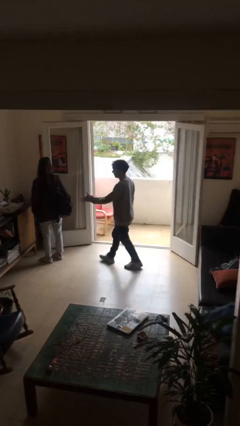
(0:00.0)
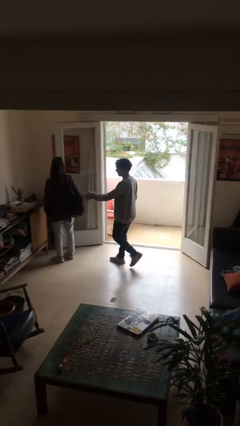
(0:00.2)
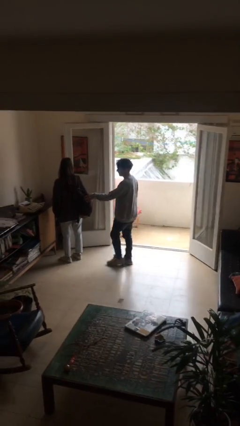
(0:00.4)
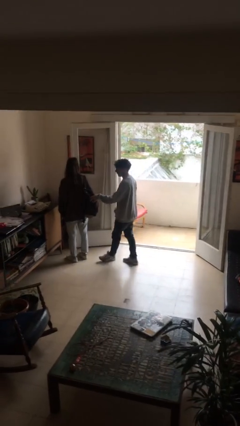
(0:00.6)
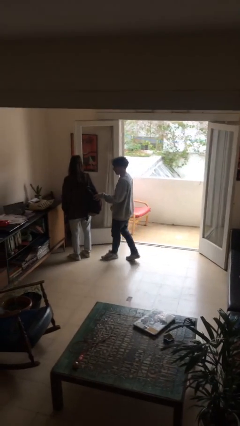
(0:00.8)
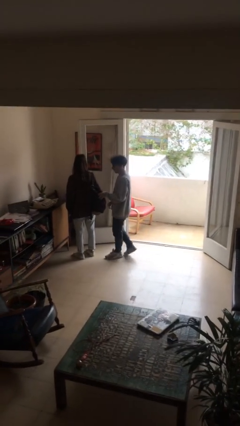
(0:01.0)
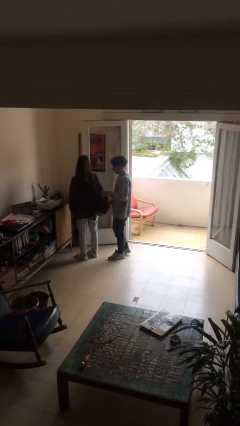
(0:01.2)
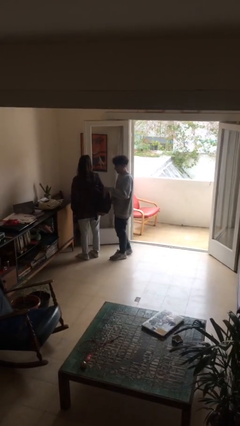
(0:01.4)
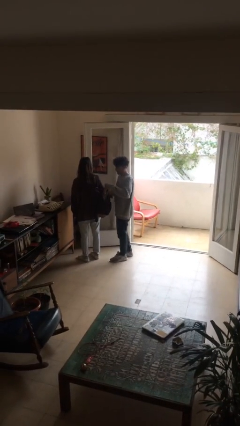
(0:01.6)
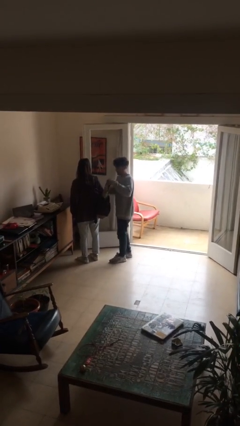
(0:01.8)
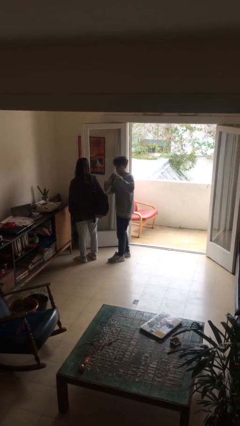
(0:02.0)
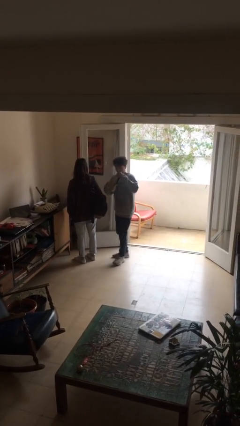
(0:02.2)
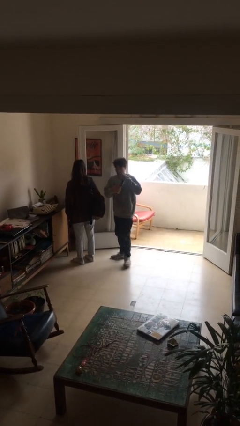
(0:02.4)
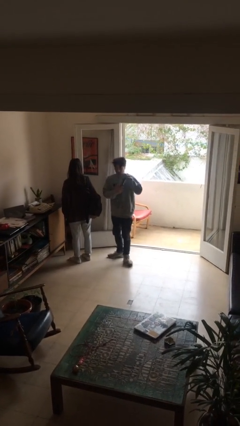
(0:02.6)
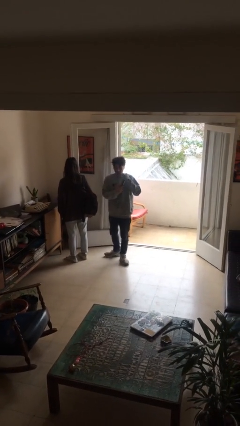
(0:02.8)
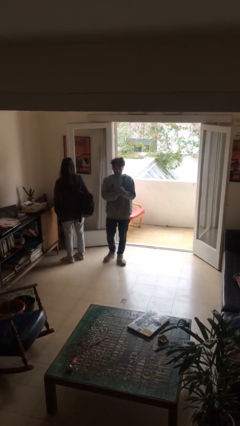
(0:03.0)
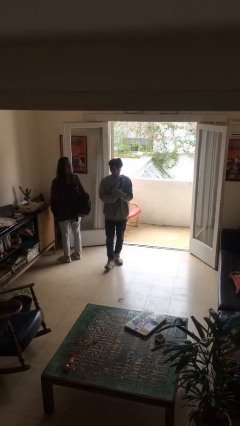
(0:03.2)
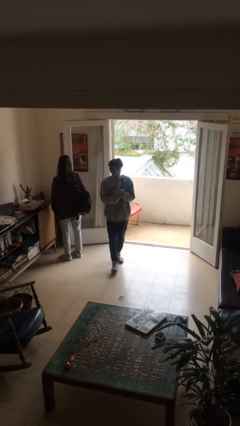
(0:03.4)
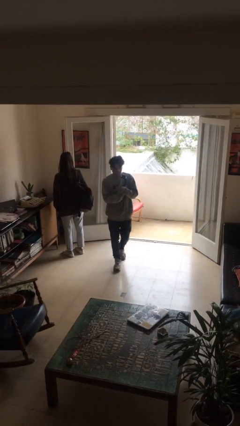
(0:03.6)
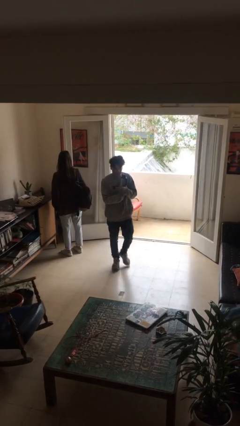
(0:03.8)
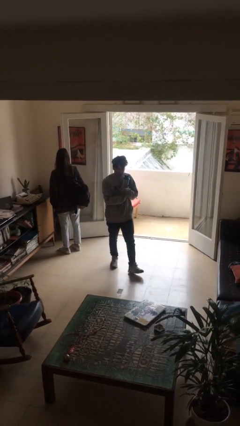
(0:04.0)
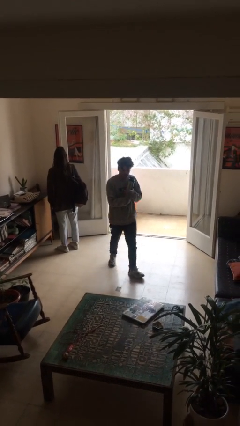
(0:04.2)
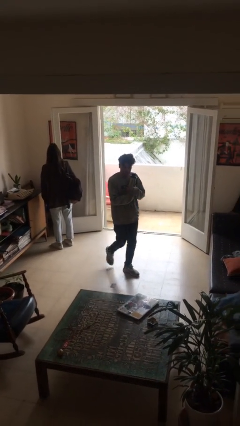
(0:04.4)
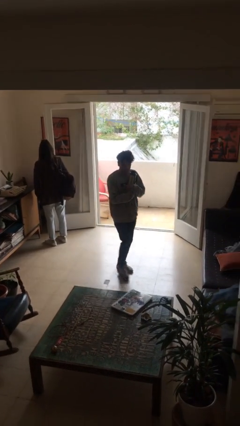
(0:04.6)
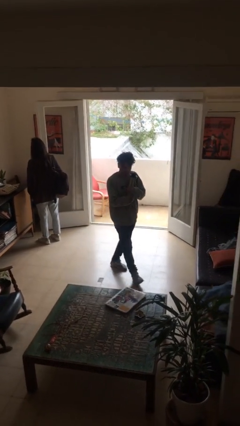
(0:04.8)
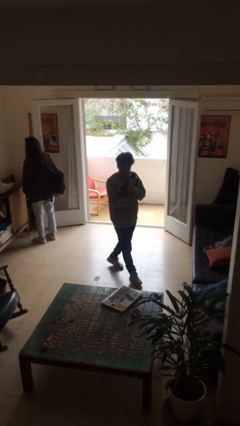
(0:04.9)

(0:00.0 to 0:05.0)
person steals object from person

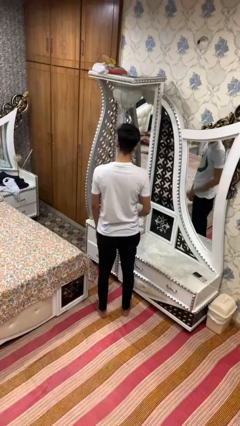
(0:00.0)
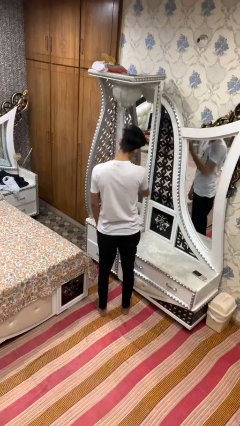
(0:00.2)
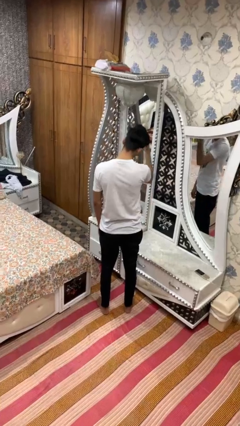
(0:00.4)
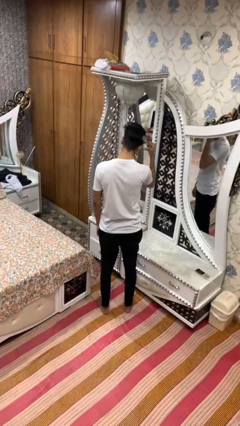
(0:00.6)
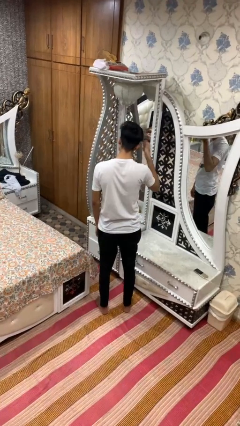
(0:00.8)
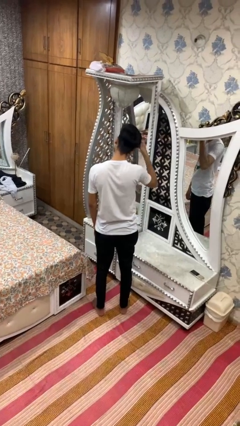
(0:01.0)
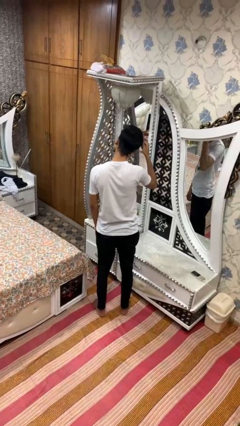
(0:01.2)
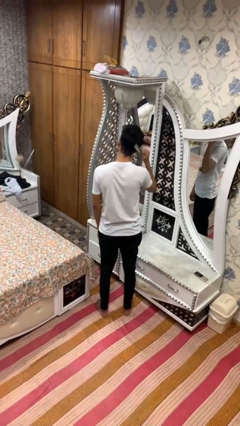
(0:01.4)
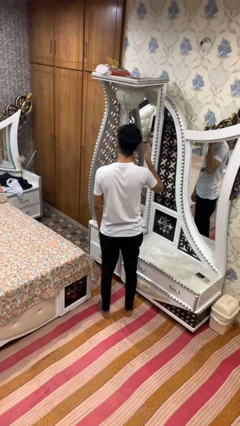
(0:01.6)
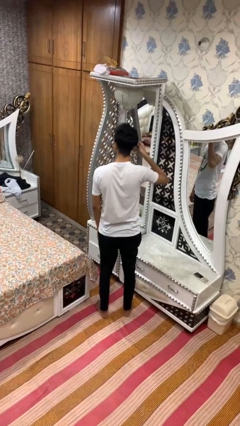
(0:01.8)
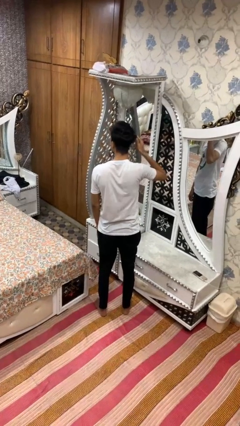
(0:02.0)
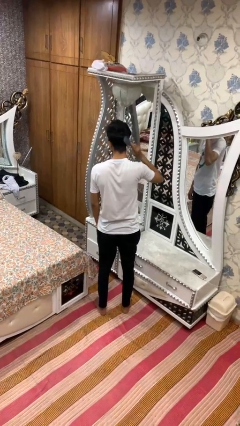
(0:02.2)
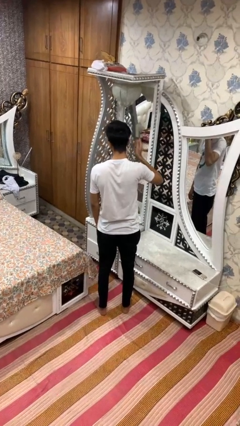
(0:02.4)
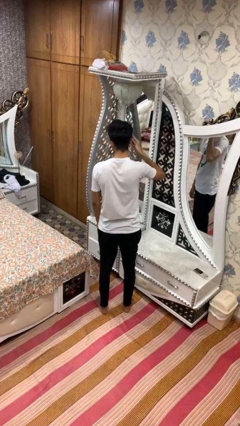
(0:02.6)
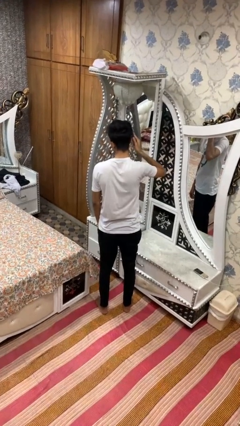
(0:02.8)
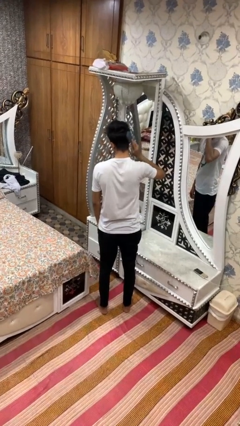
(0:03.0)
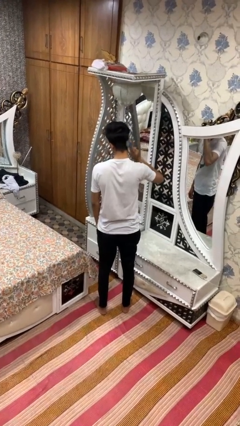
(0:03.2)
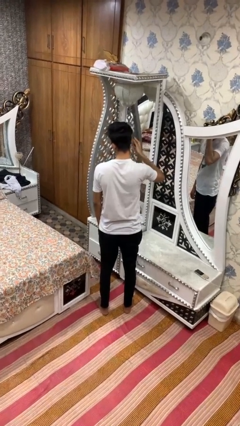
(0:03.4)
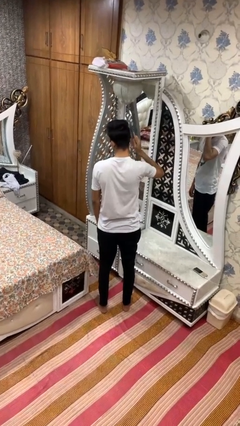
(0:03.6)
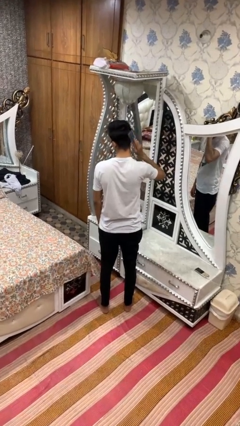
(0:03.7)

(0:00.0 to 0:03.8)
person brushes hair

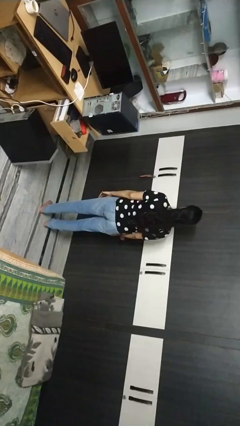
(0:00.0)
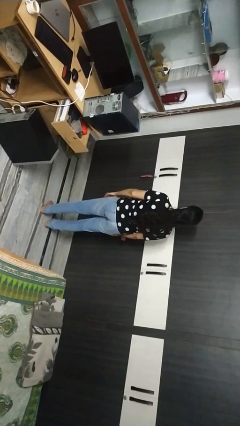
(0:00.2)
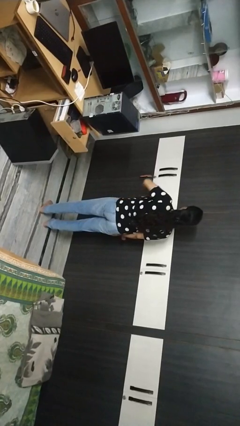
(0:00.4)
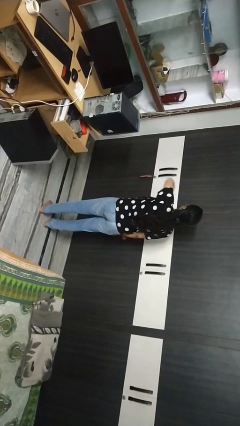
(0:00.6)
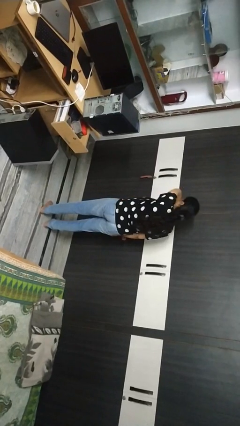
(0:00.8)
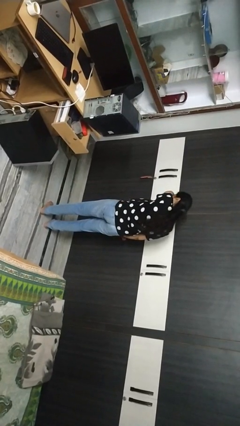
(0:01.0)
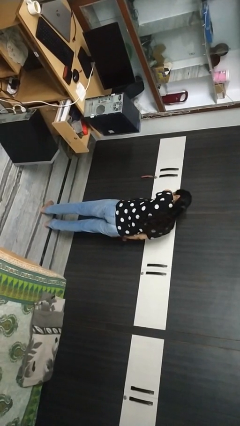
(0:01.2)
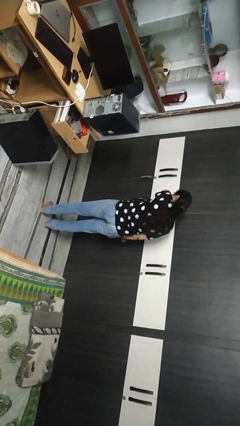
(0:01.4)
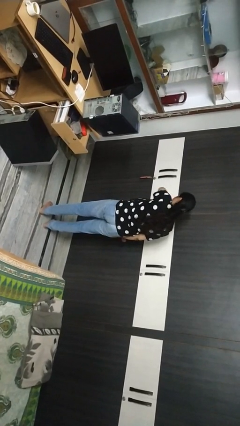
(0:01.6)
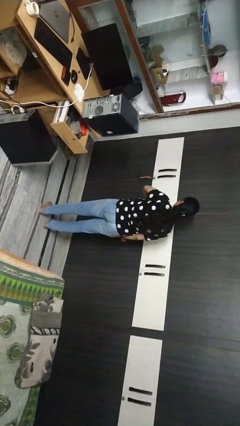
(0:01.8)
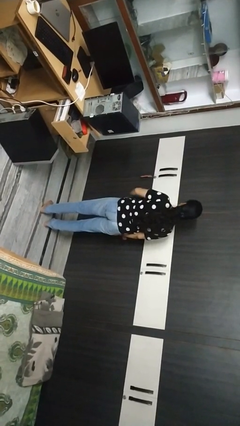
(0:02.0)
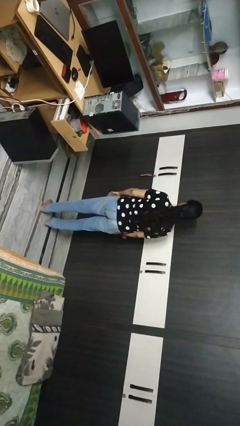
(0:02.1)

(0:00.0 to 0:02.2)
person sneezes into arm

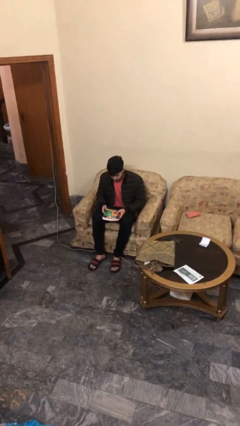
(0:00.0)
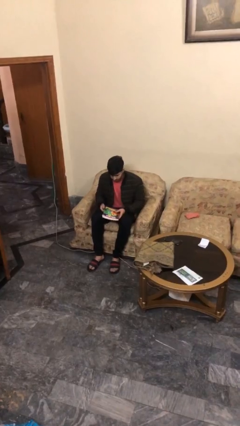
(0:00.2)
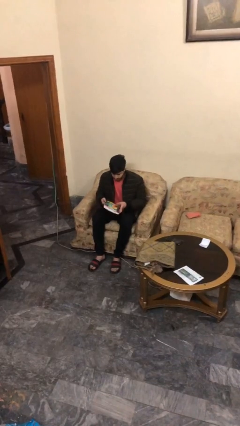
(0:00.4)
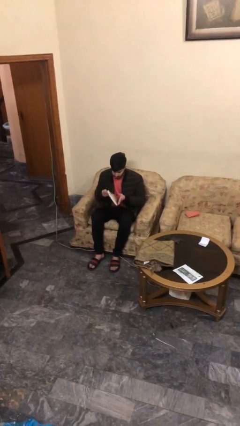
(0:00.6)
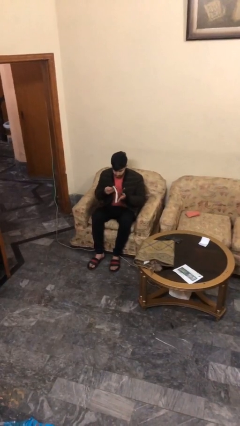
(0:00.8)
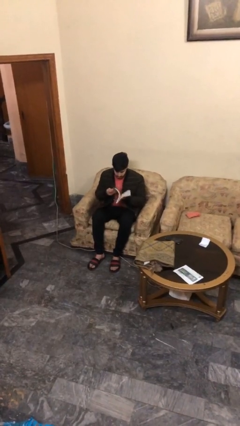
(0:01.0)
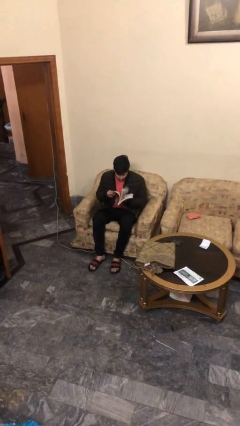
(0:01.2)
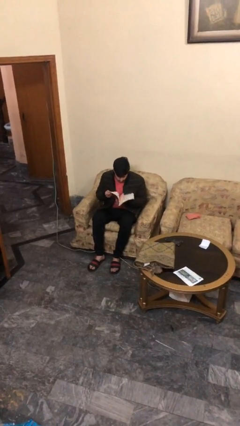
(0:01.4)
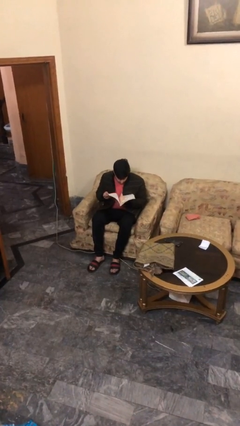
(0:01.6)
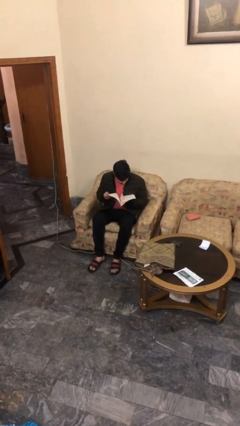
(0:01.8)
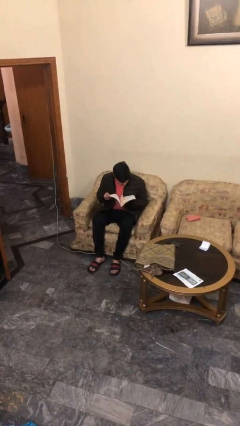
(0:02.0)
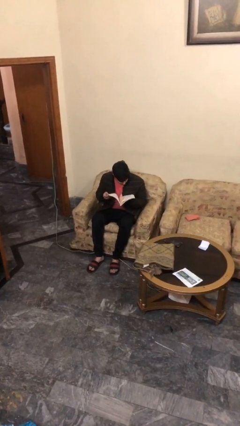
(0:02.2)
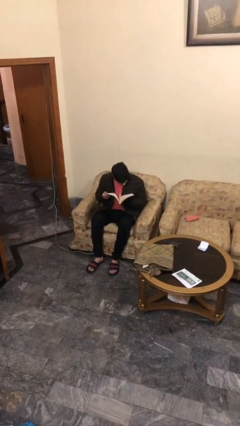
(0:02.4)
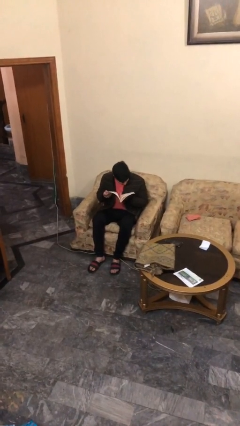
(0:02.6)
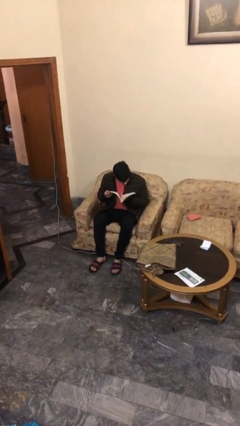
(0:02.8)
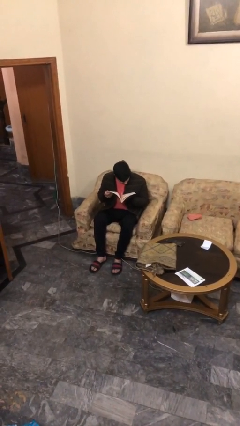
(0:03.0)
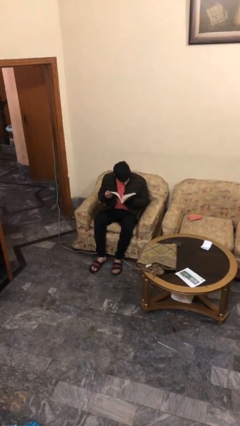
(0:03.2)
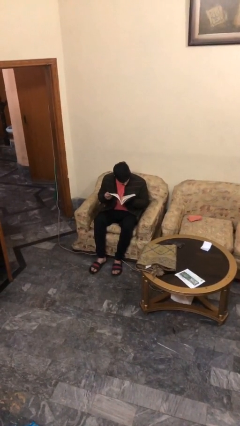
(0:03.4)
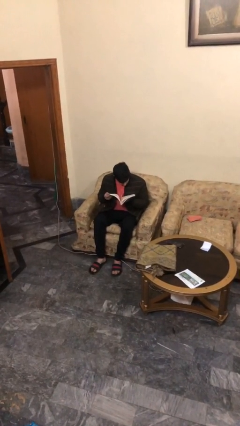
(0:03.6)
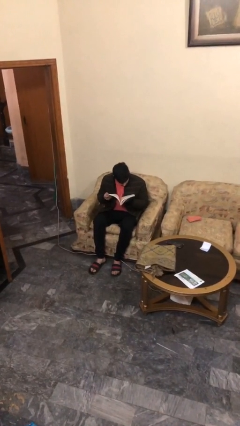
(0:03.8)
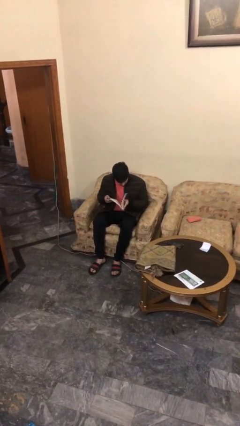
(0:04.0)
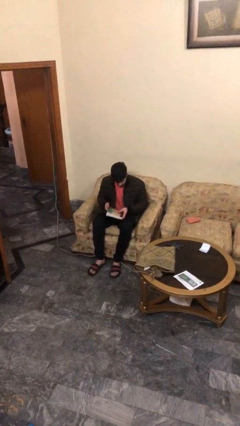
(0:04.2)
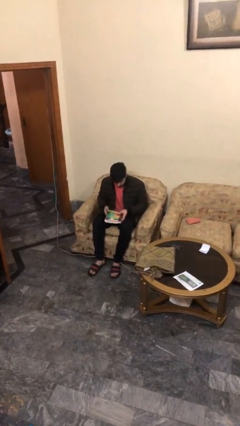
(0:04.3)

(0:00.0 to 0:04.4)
person reads document

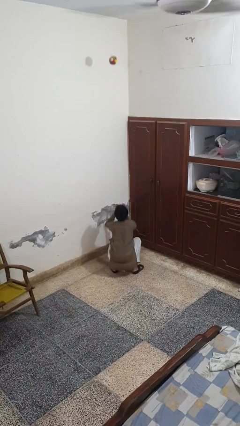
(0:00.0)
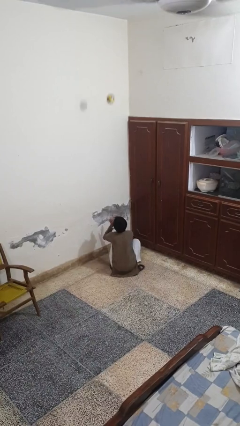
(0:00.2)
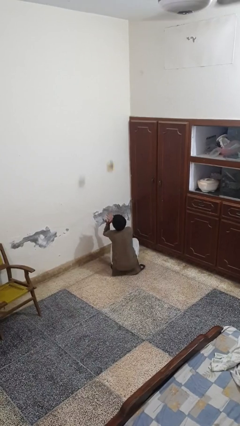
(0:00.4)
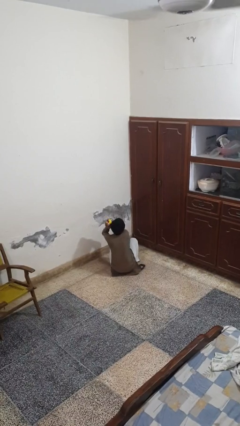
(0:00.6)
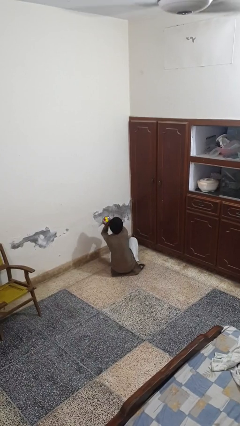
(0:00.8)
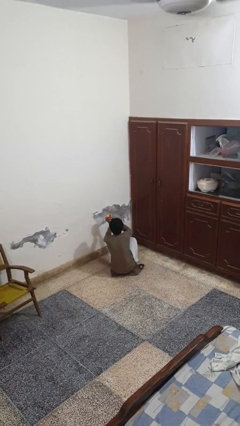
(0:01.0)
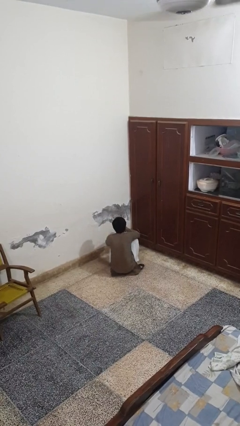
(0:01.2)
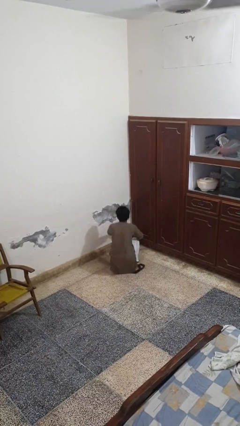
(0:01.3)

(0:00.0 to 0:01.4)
person catches dropped object

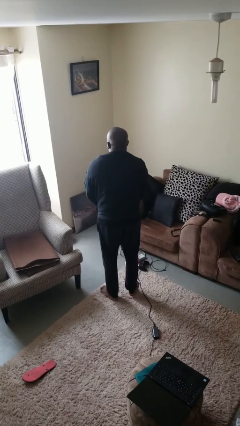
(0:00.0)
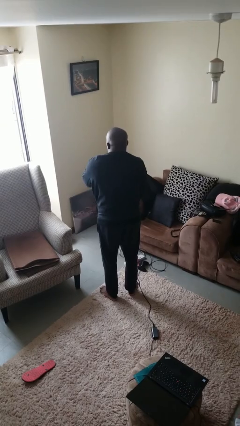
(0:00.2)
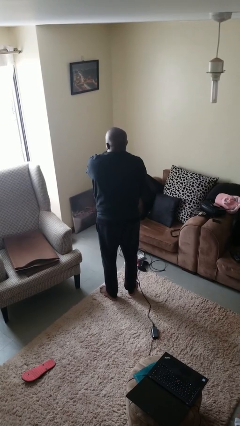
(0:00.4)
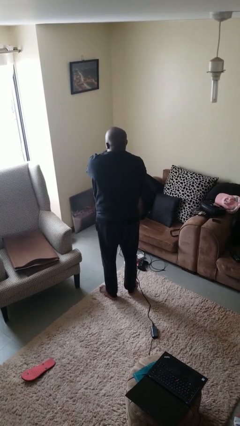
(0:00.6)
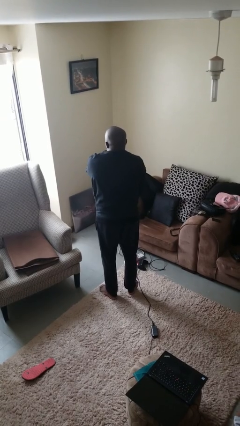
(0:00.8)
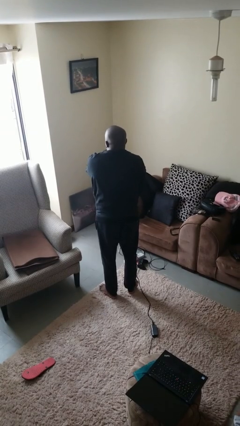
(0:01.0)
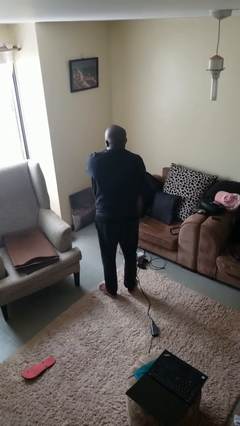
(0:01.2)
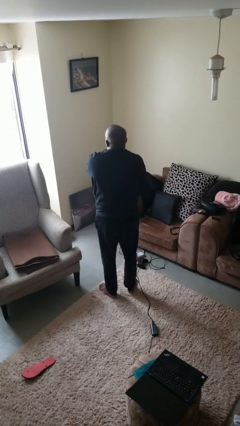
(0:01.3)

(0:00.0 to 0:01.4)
person zips up jacket
